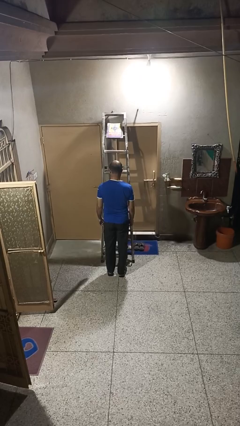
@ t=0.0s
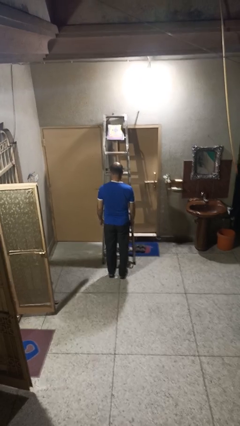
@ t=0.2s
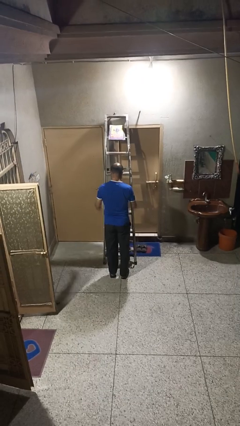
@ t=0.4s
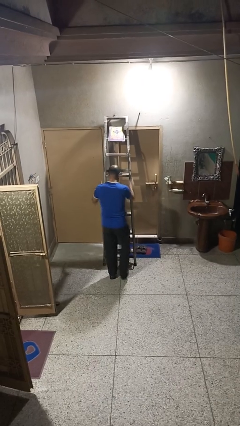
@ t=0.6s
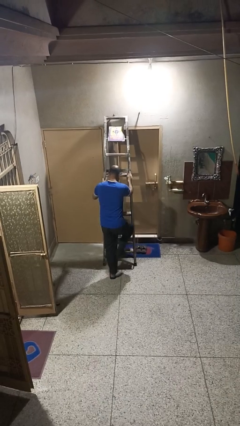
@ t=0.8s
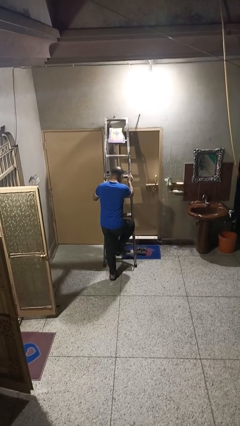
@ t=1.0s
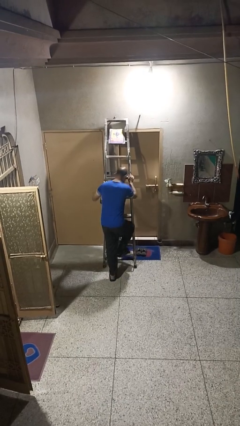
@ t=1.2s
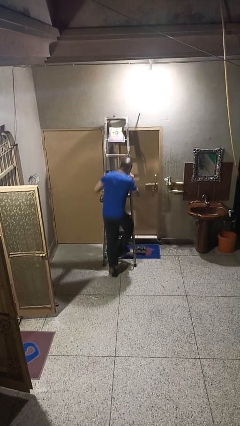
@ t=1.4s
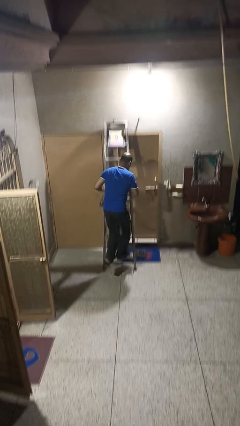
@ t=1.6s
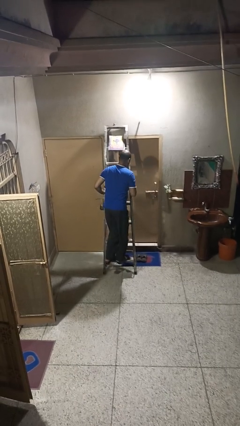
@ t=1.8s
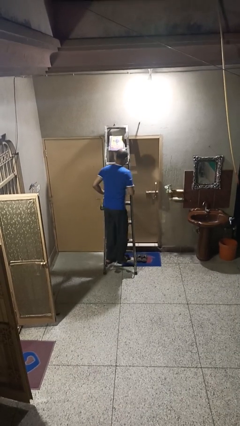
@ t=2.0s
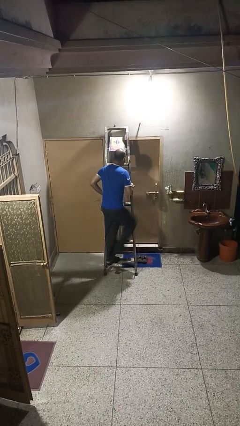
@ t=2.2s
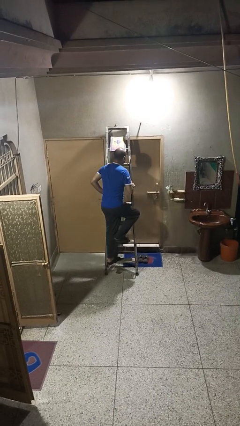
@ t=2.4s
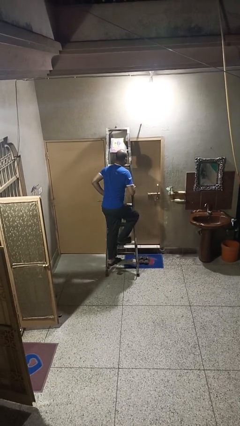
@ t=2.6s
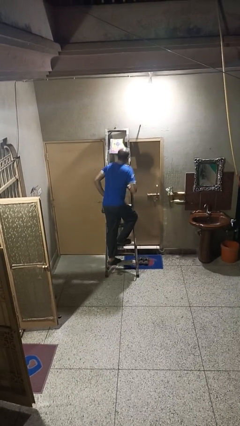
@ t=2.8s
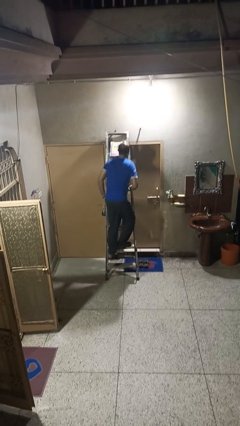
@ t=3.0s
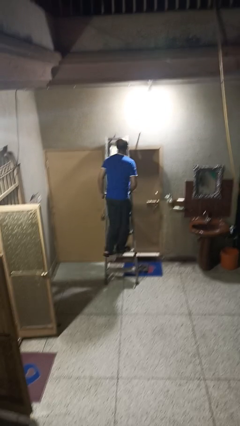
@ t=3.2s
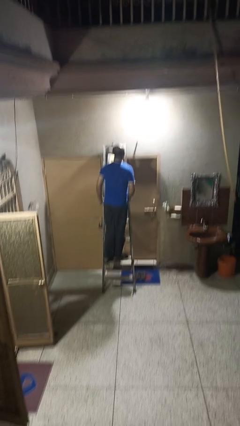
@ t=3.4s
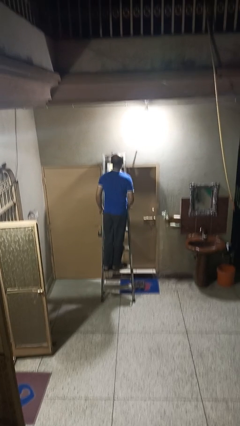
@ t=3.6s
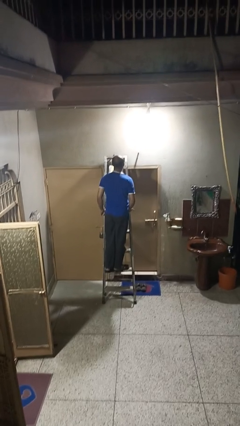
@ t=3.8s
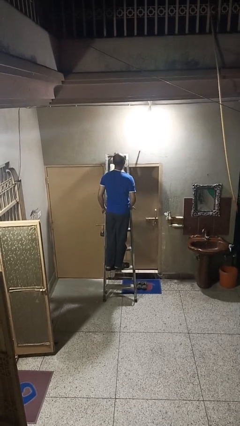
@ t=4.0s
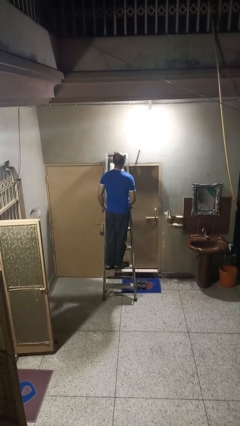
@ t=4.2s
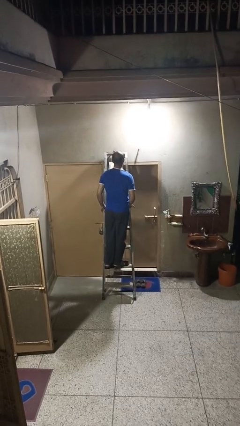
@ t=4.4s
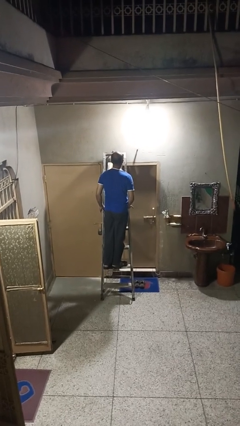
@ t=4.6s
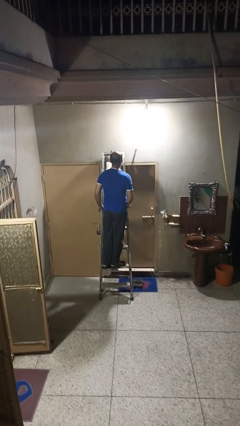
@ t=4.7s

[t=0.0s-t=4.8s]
person climbs up ladder

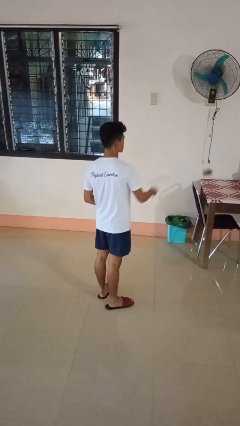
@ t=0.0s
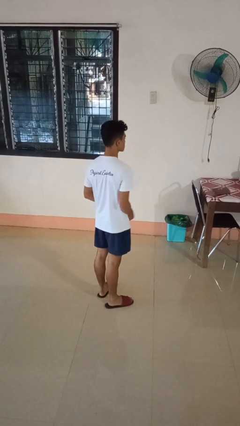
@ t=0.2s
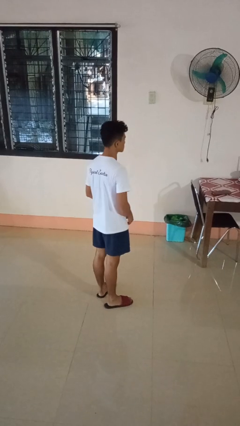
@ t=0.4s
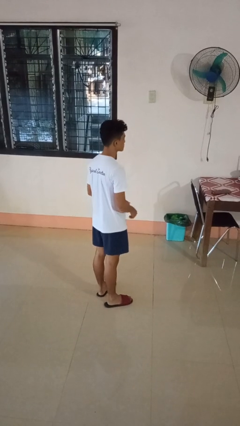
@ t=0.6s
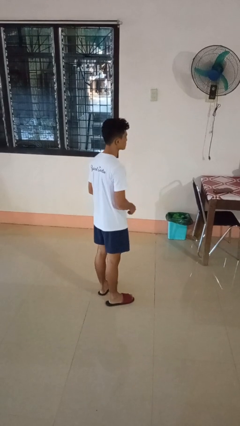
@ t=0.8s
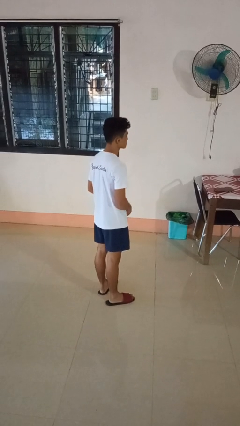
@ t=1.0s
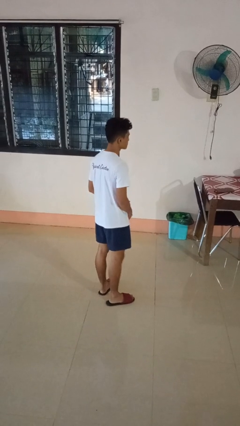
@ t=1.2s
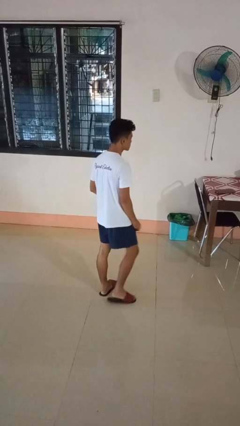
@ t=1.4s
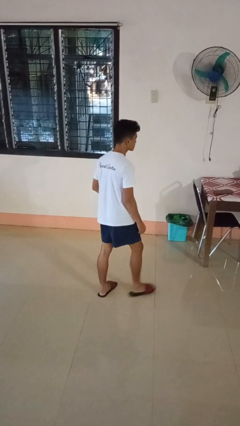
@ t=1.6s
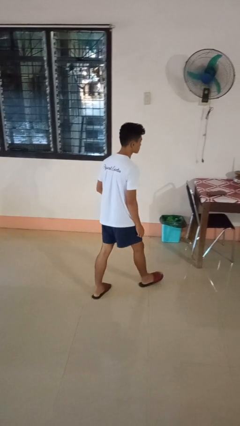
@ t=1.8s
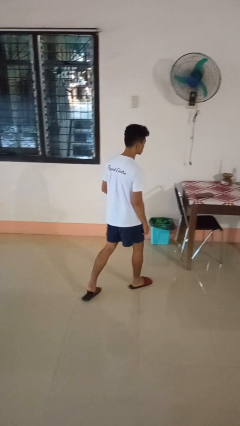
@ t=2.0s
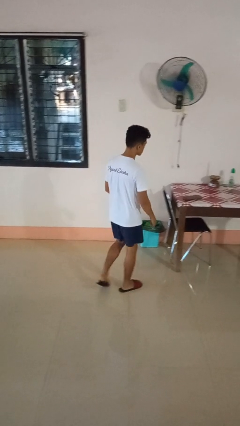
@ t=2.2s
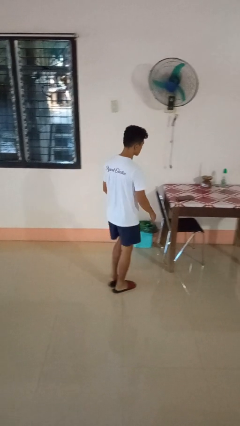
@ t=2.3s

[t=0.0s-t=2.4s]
person throws object on table

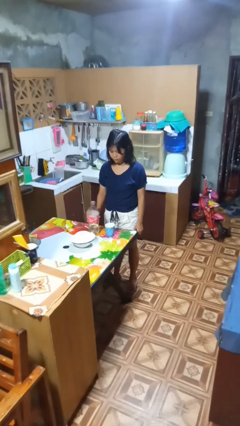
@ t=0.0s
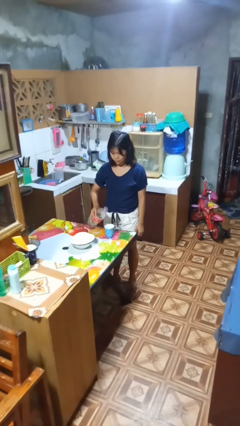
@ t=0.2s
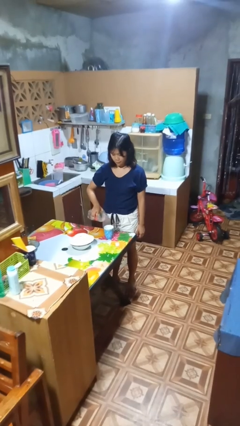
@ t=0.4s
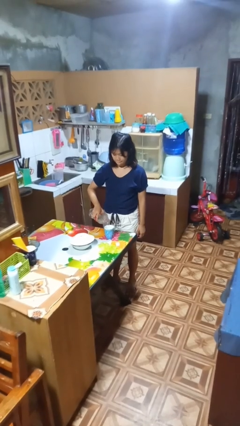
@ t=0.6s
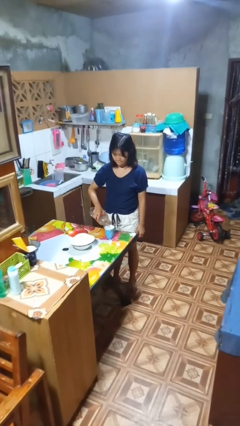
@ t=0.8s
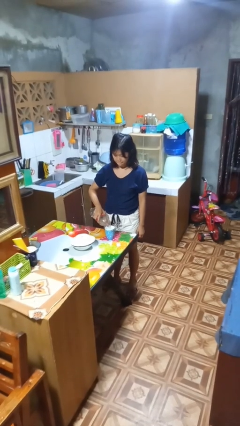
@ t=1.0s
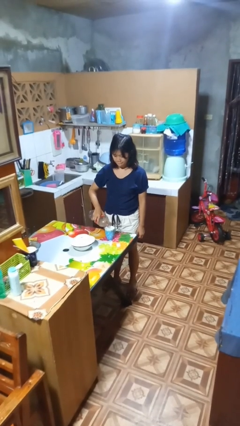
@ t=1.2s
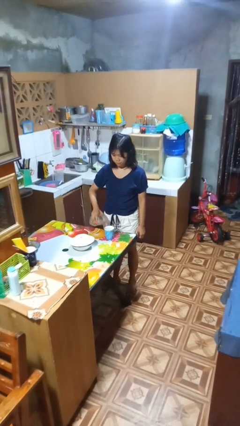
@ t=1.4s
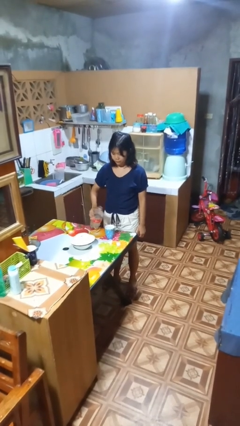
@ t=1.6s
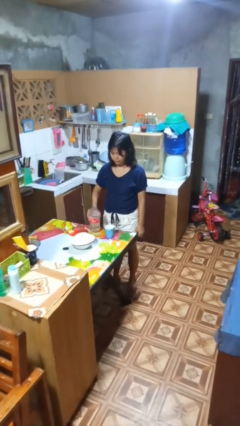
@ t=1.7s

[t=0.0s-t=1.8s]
person pours liquid into cup

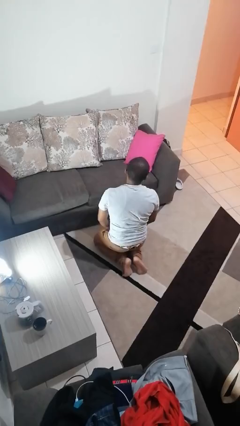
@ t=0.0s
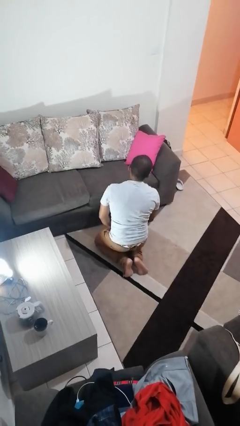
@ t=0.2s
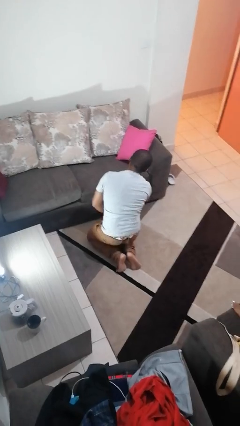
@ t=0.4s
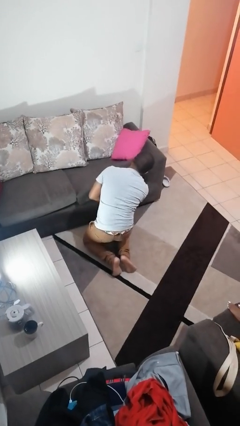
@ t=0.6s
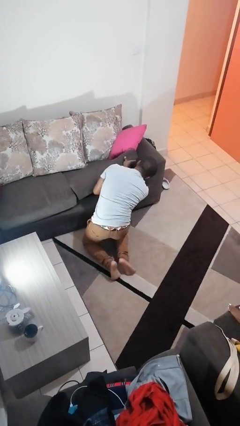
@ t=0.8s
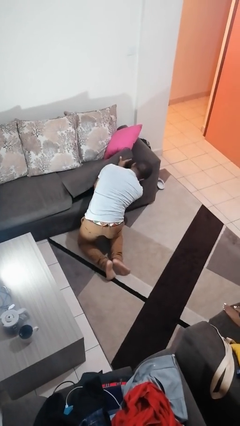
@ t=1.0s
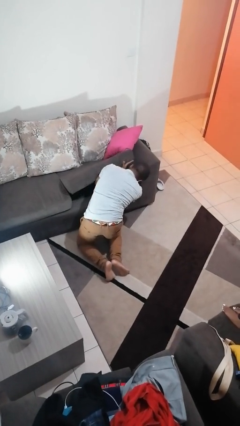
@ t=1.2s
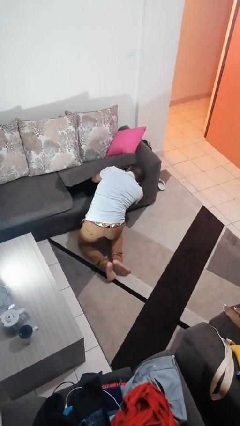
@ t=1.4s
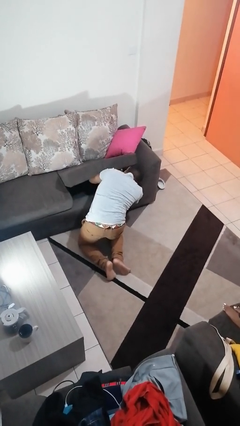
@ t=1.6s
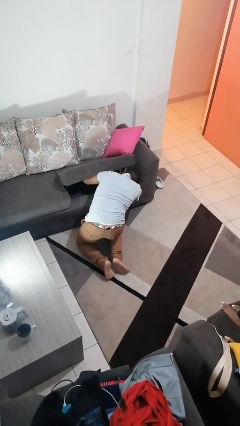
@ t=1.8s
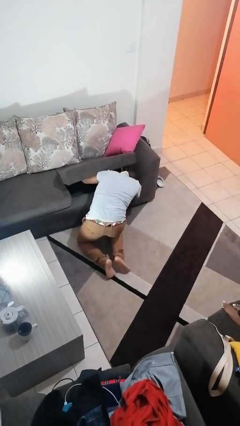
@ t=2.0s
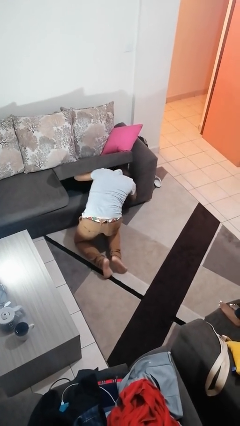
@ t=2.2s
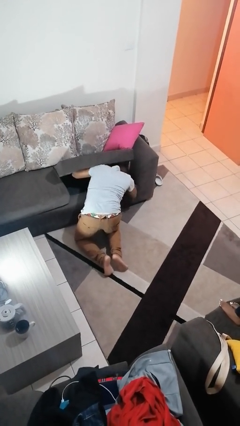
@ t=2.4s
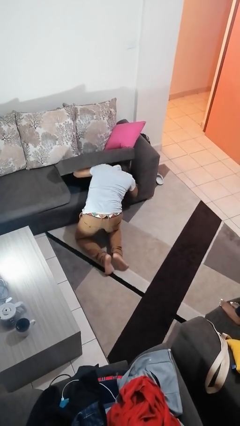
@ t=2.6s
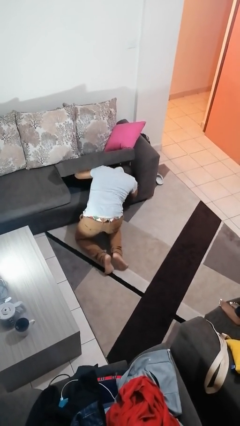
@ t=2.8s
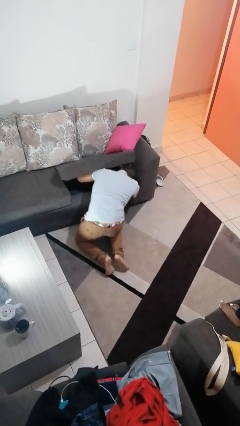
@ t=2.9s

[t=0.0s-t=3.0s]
person searches under couch

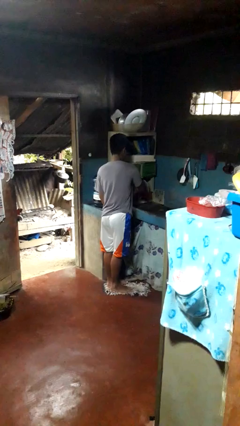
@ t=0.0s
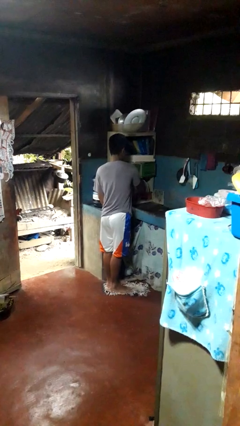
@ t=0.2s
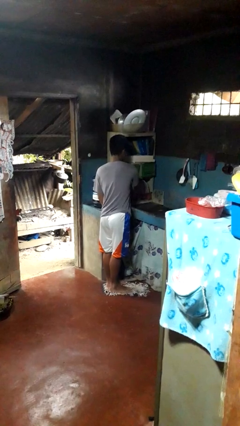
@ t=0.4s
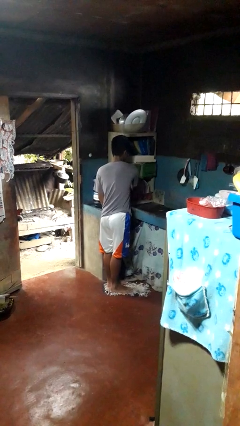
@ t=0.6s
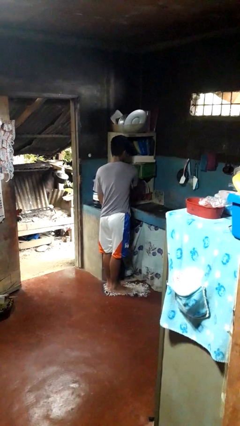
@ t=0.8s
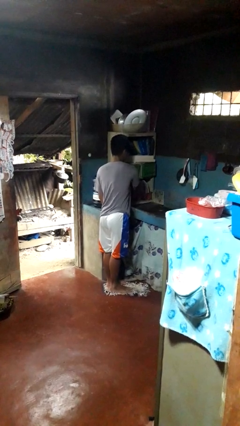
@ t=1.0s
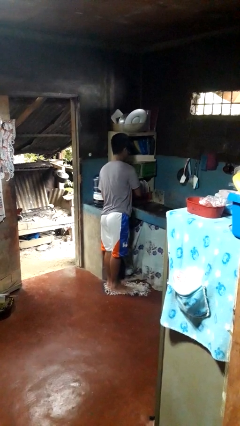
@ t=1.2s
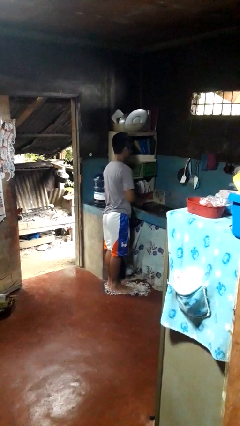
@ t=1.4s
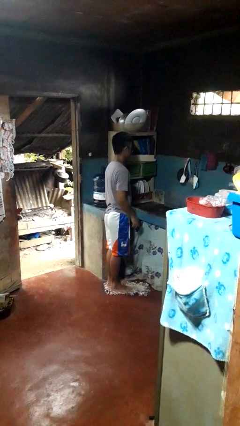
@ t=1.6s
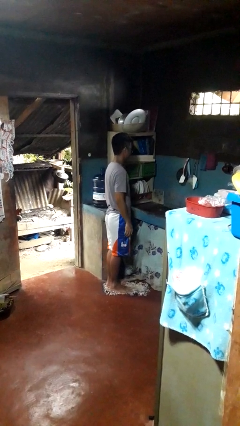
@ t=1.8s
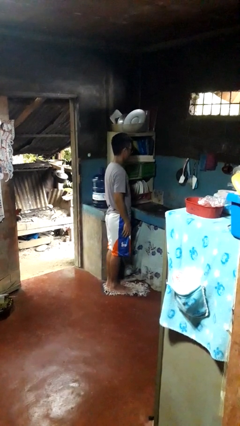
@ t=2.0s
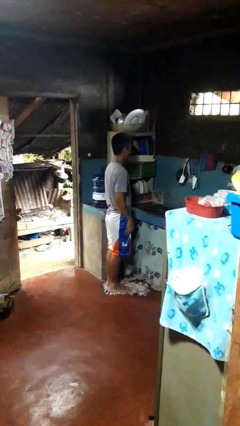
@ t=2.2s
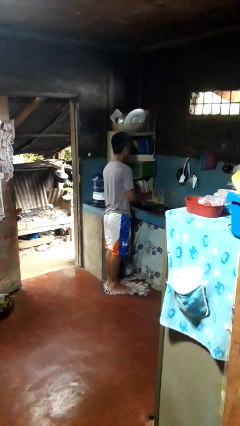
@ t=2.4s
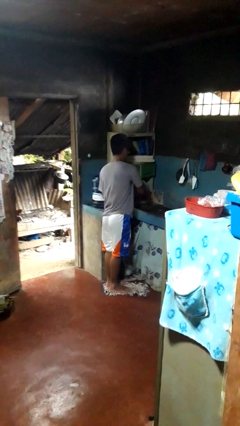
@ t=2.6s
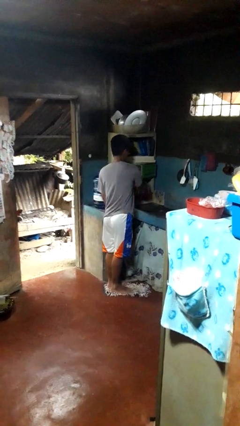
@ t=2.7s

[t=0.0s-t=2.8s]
person loads dishwasher

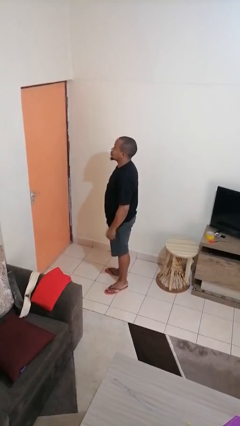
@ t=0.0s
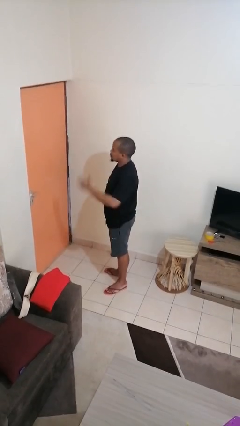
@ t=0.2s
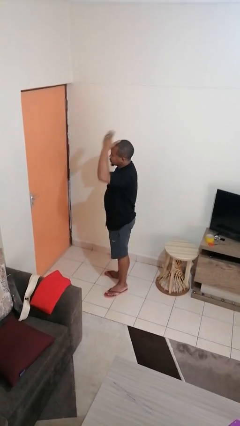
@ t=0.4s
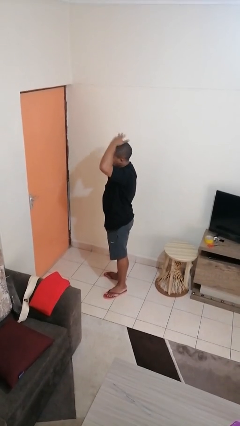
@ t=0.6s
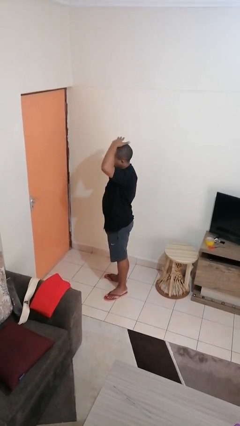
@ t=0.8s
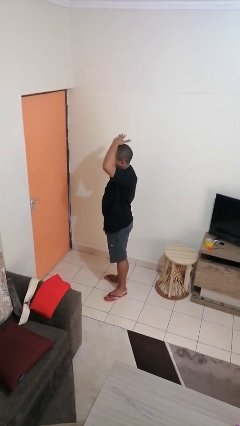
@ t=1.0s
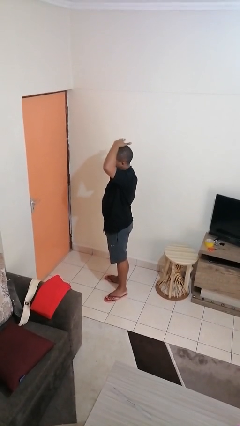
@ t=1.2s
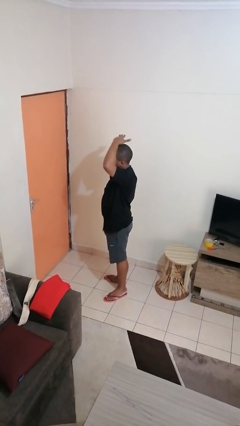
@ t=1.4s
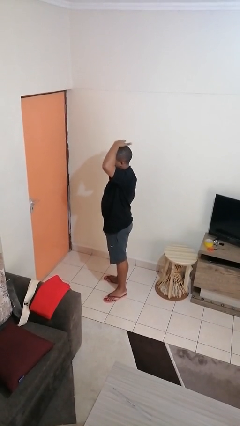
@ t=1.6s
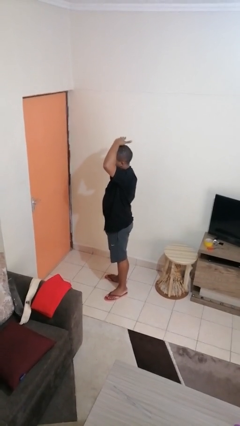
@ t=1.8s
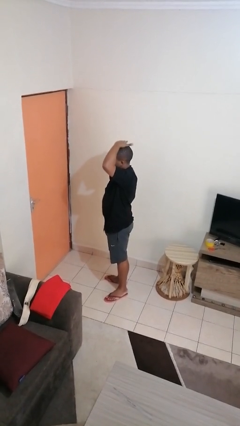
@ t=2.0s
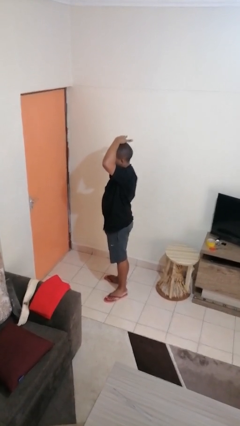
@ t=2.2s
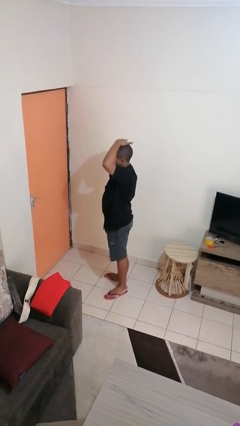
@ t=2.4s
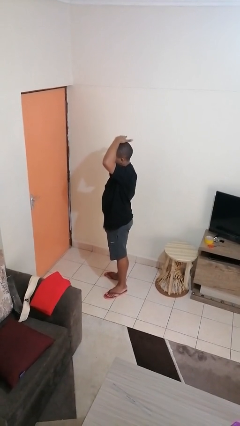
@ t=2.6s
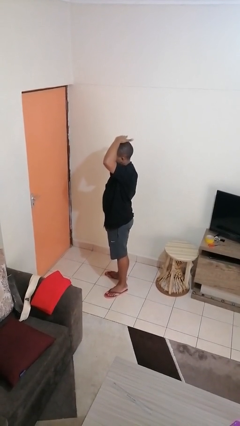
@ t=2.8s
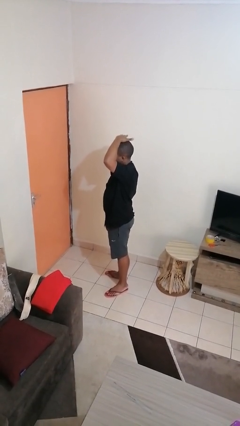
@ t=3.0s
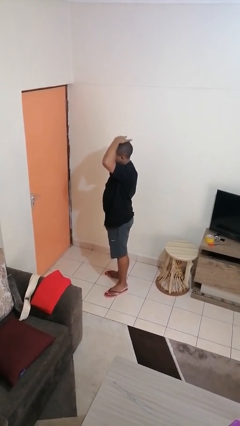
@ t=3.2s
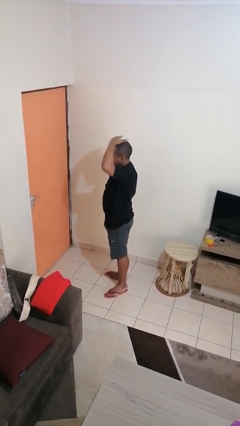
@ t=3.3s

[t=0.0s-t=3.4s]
person pats head
